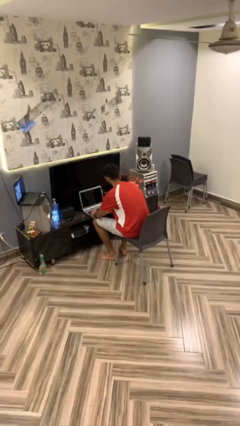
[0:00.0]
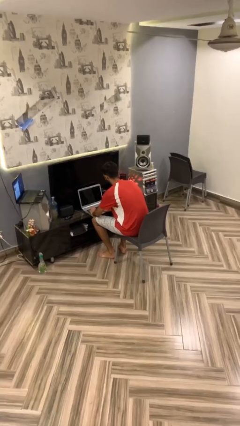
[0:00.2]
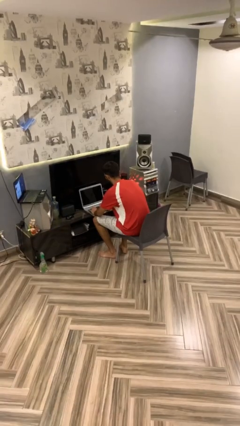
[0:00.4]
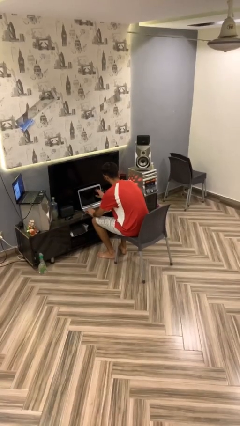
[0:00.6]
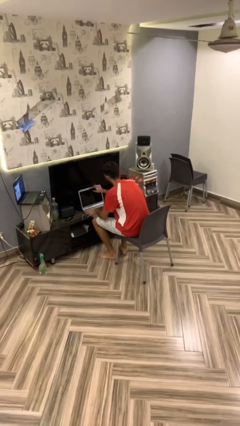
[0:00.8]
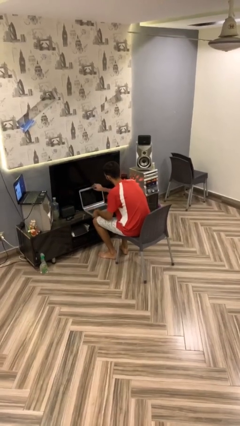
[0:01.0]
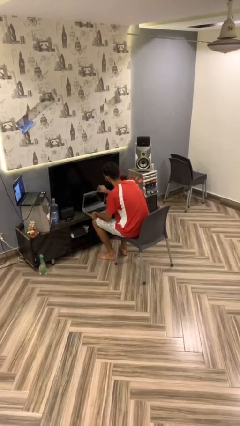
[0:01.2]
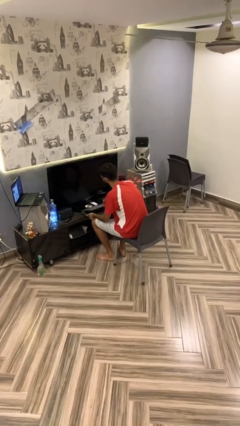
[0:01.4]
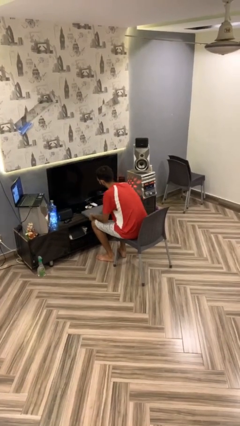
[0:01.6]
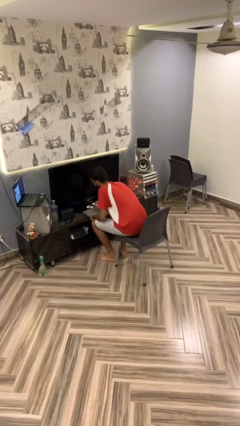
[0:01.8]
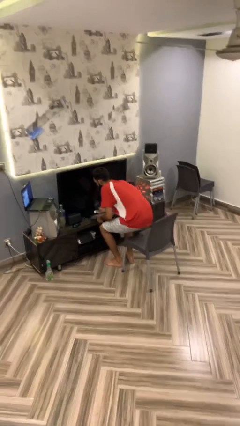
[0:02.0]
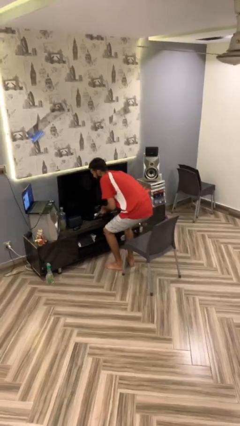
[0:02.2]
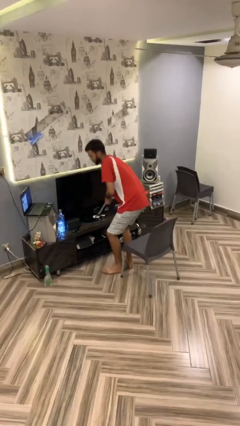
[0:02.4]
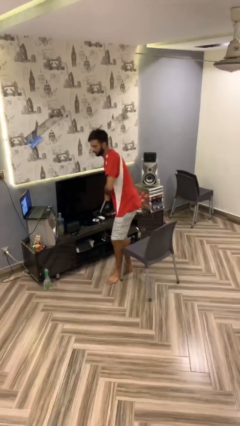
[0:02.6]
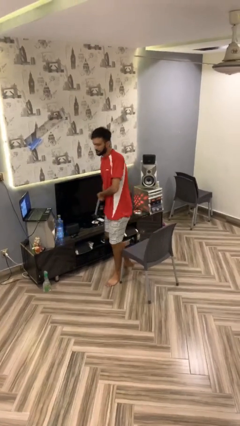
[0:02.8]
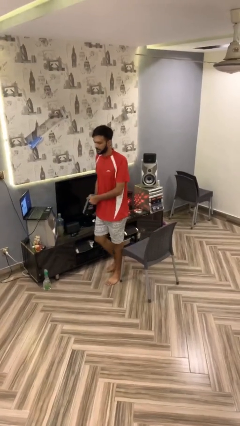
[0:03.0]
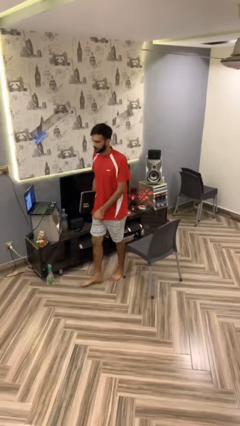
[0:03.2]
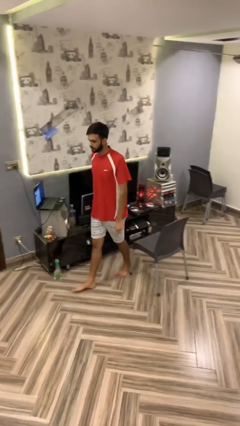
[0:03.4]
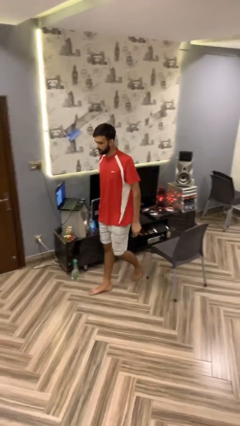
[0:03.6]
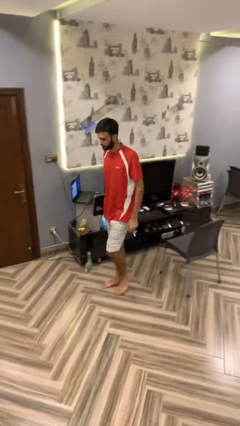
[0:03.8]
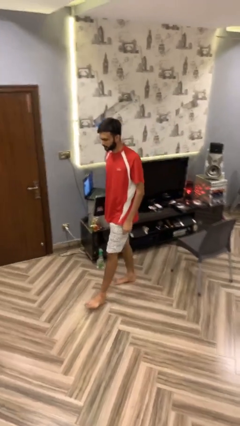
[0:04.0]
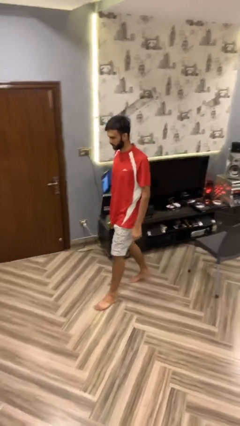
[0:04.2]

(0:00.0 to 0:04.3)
person stands up

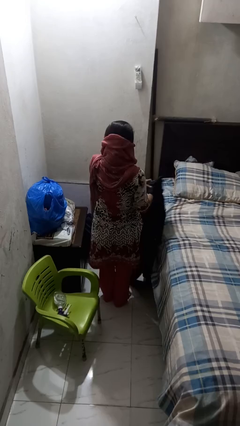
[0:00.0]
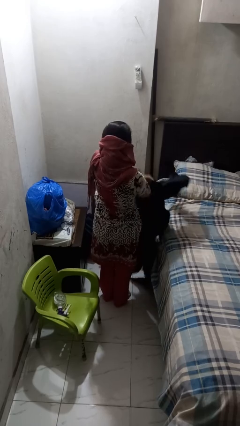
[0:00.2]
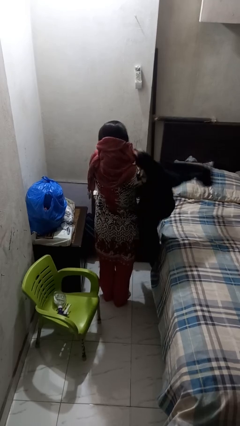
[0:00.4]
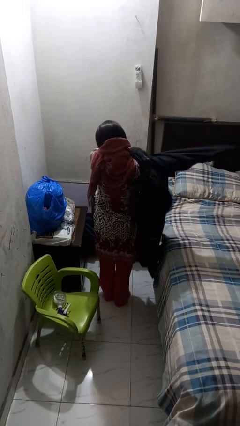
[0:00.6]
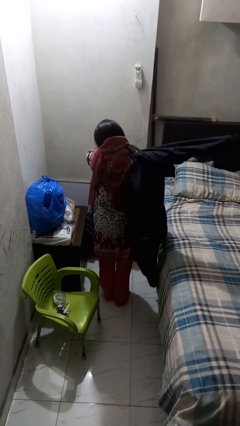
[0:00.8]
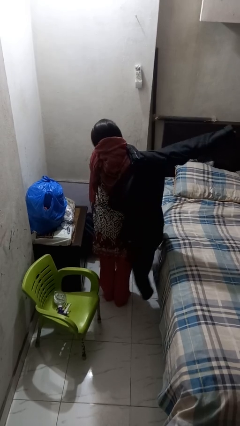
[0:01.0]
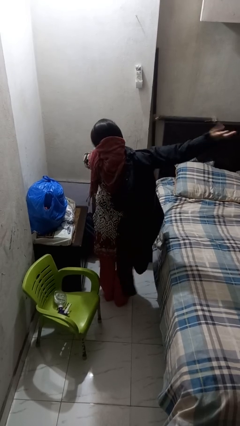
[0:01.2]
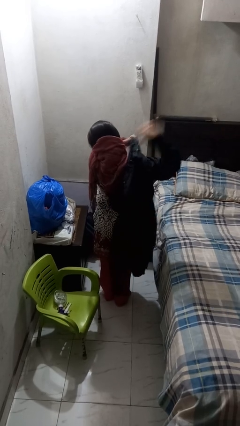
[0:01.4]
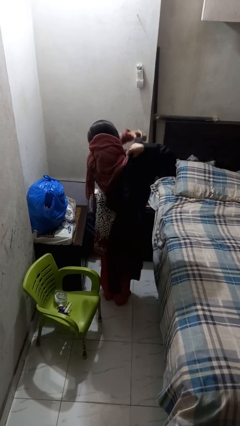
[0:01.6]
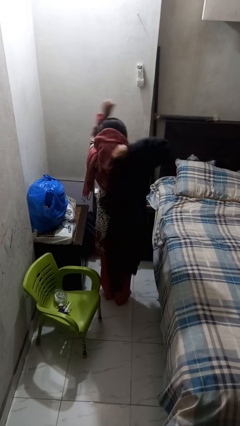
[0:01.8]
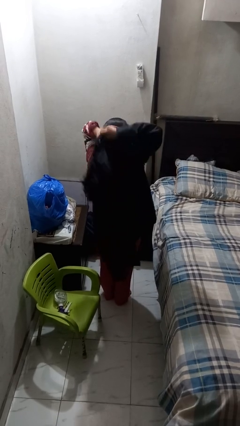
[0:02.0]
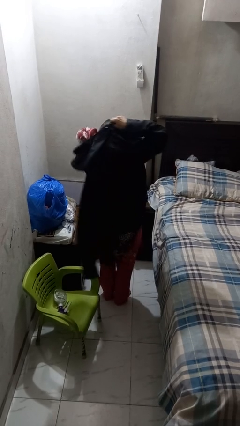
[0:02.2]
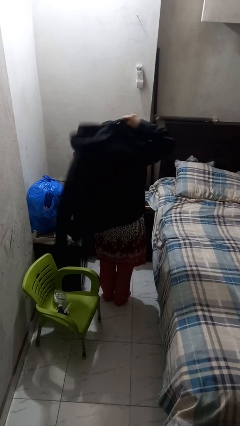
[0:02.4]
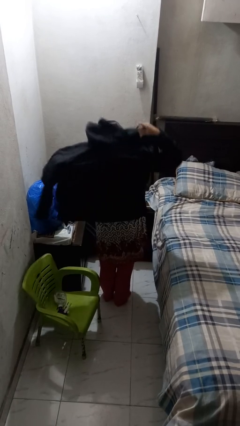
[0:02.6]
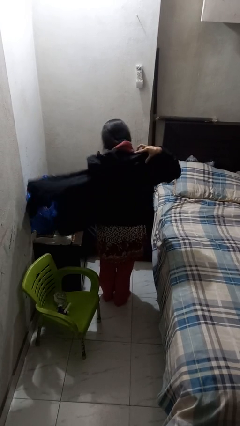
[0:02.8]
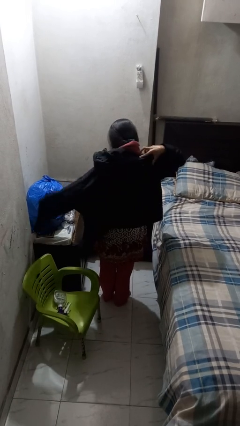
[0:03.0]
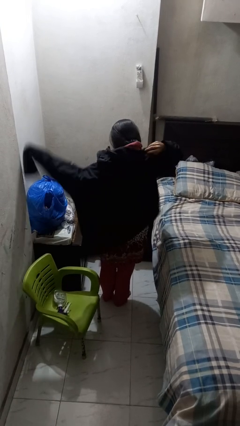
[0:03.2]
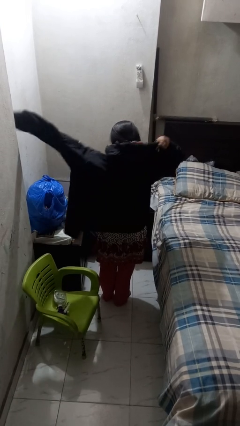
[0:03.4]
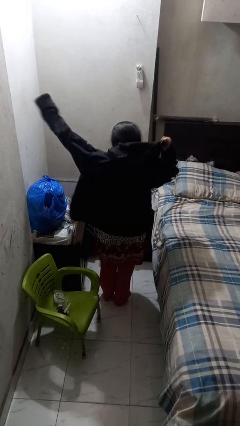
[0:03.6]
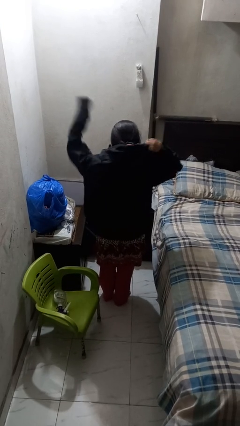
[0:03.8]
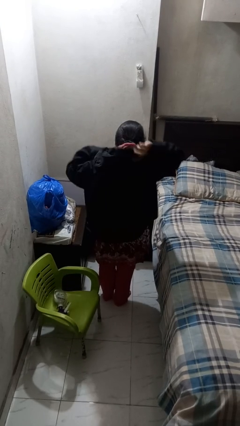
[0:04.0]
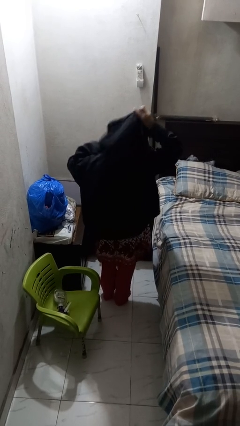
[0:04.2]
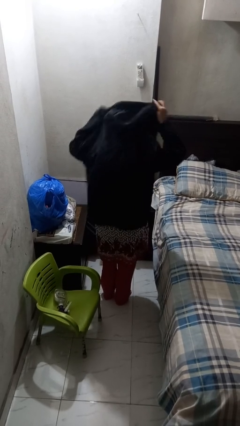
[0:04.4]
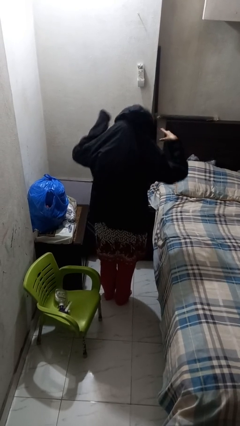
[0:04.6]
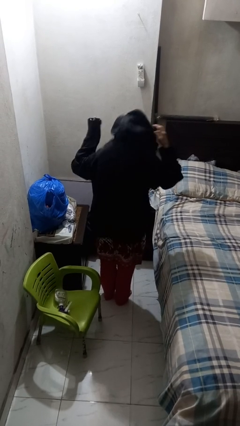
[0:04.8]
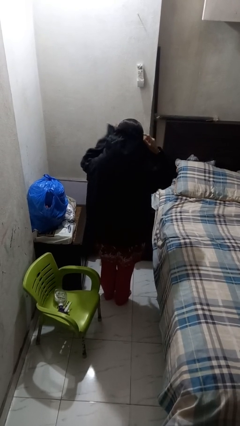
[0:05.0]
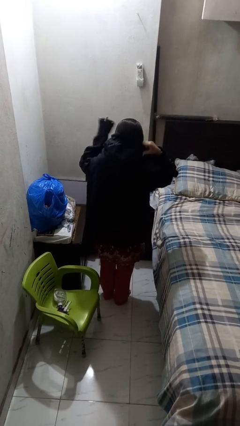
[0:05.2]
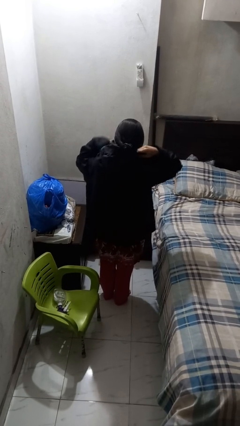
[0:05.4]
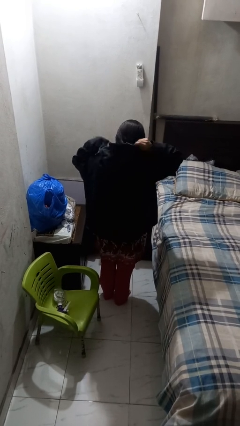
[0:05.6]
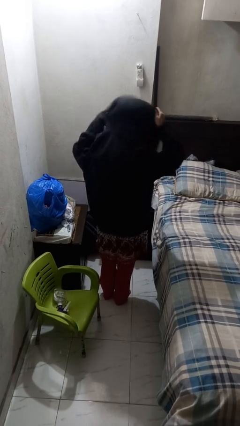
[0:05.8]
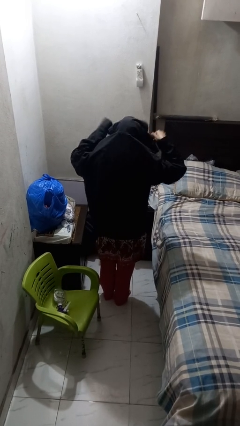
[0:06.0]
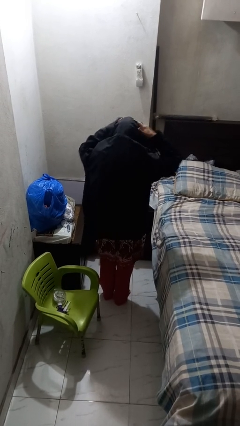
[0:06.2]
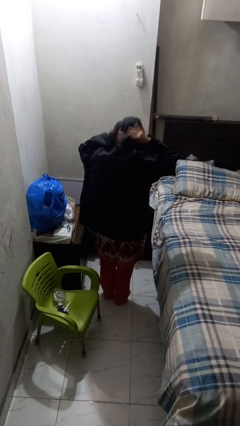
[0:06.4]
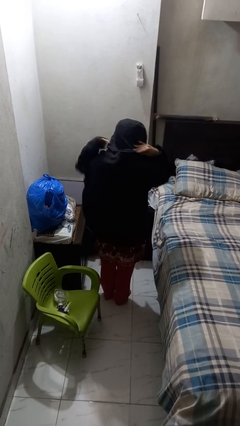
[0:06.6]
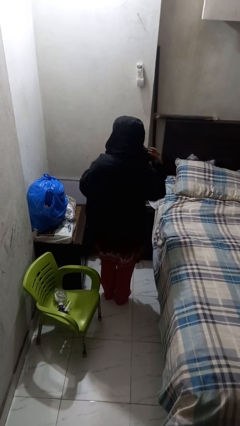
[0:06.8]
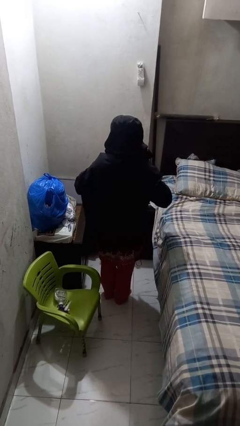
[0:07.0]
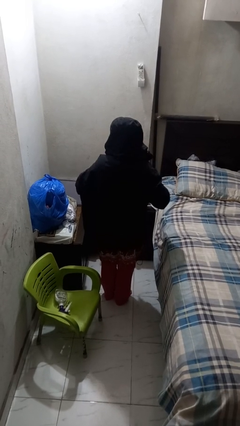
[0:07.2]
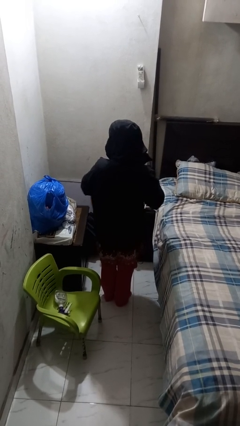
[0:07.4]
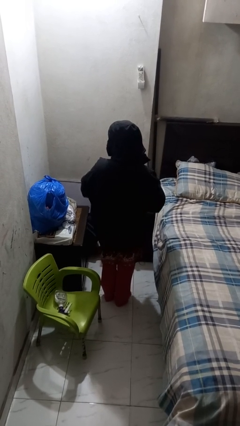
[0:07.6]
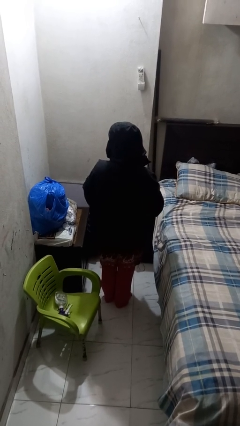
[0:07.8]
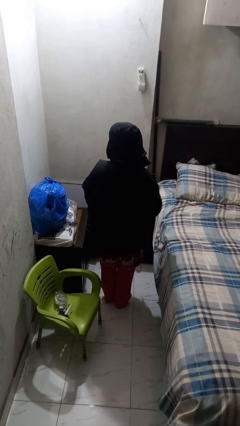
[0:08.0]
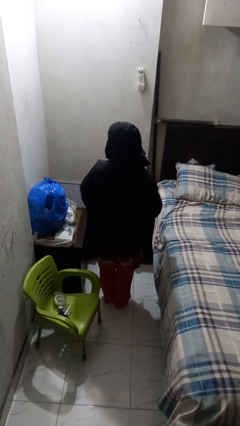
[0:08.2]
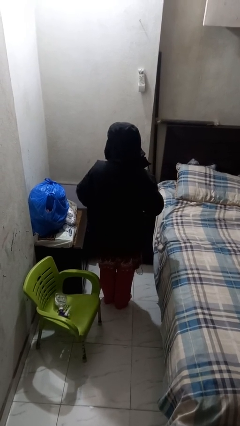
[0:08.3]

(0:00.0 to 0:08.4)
person puts on hoodie

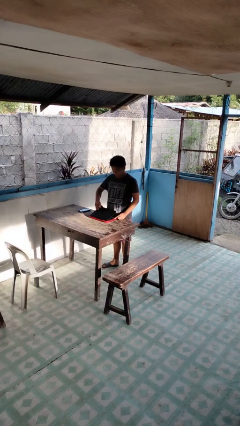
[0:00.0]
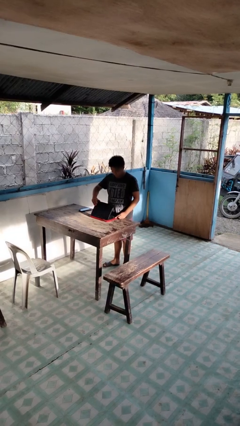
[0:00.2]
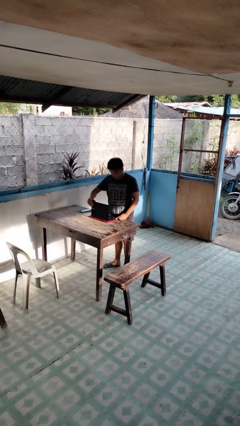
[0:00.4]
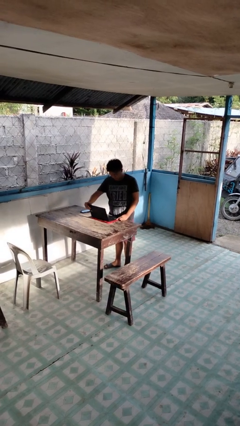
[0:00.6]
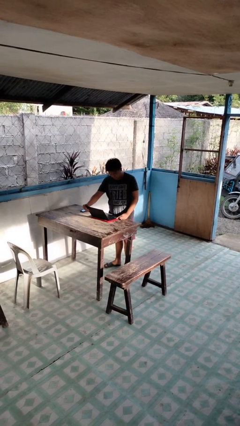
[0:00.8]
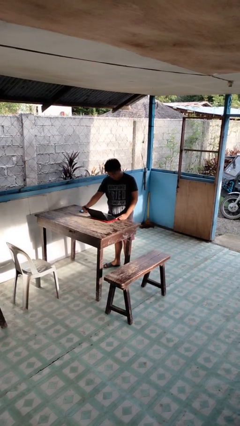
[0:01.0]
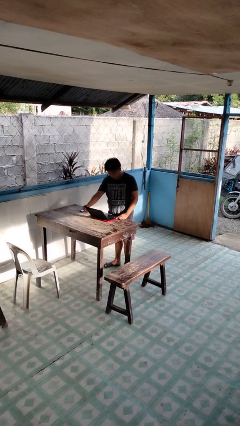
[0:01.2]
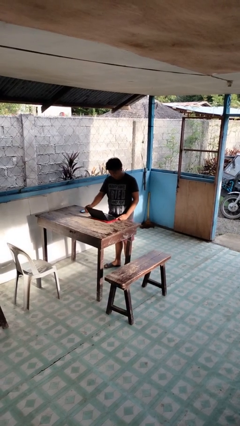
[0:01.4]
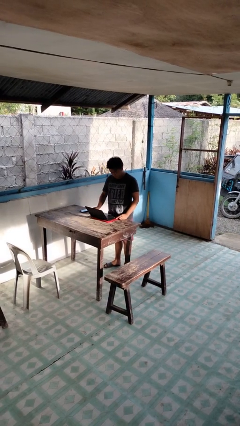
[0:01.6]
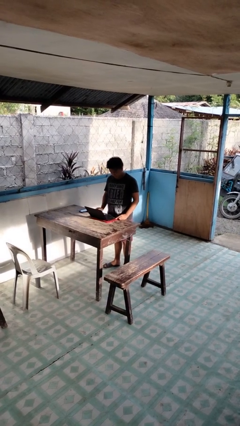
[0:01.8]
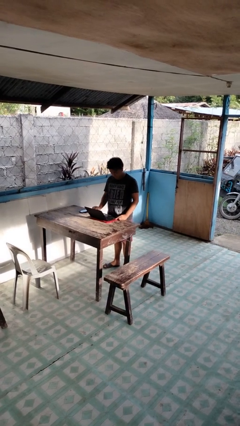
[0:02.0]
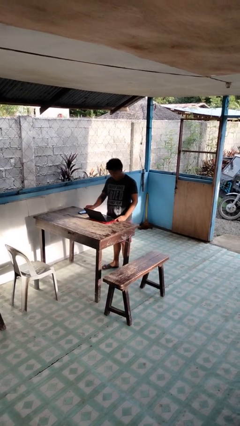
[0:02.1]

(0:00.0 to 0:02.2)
person opens laptop

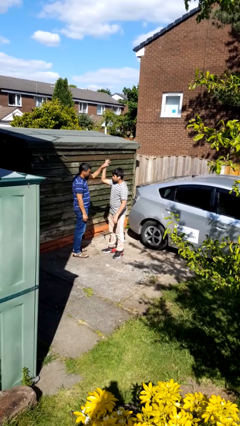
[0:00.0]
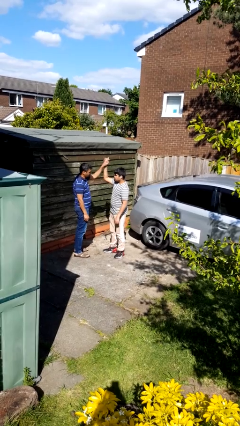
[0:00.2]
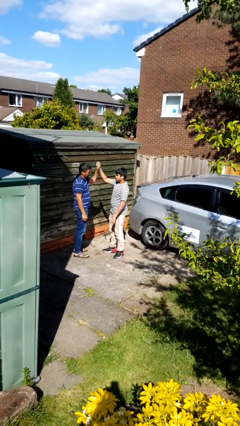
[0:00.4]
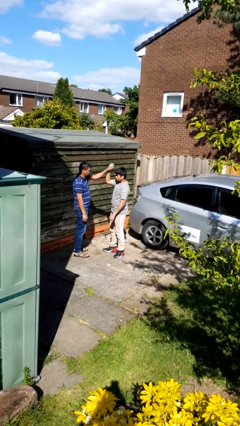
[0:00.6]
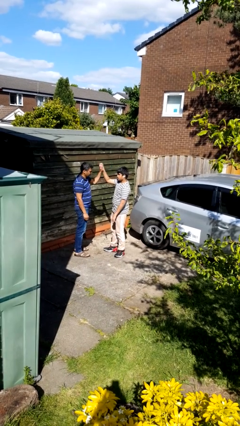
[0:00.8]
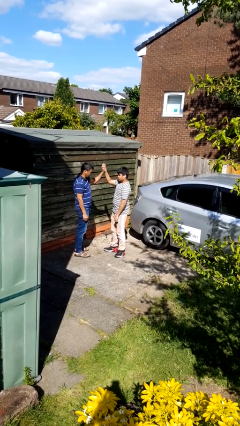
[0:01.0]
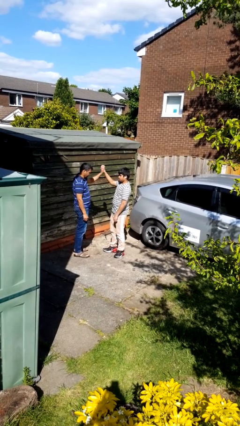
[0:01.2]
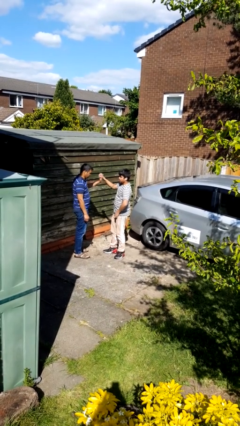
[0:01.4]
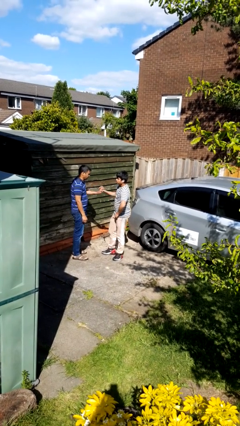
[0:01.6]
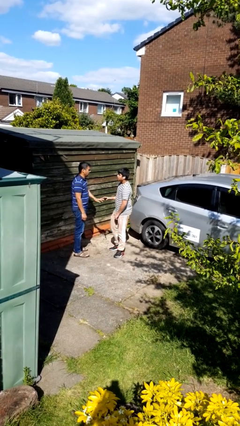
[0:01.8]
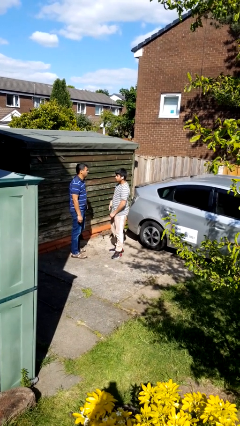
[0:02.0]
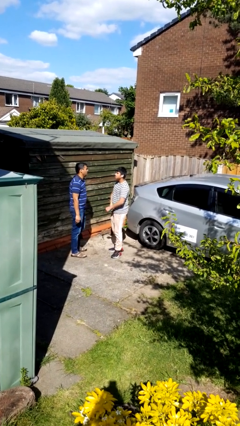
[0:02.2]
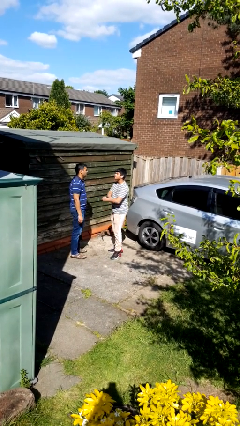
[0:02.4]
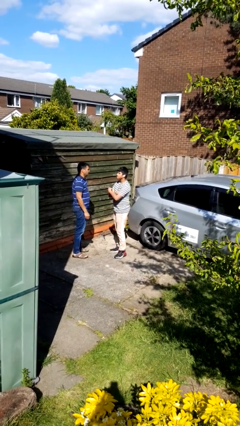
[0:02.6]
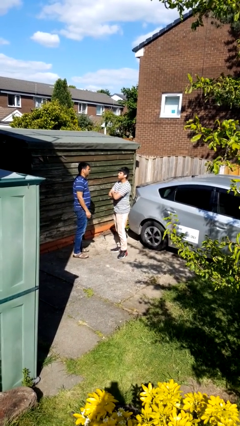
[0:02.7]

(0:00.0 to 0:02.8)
person highfives hand

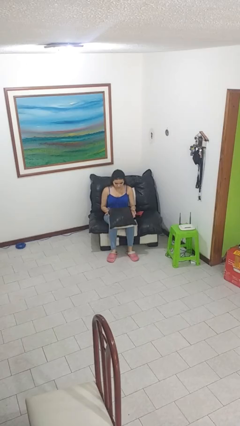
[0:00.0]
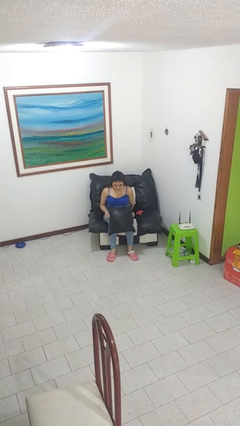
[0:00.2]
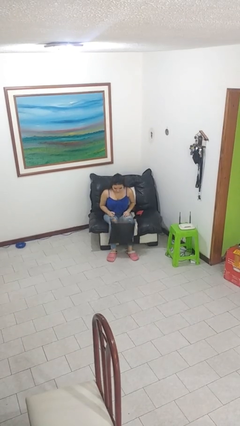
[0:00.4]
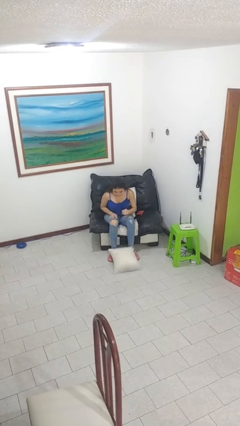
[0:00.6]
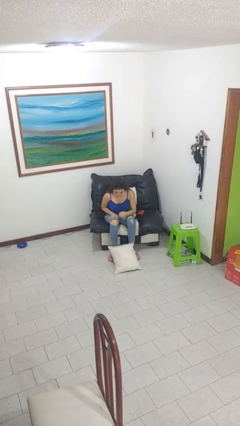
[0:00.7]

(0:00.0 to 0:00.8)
person drops object
